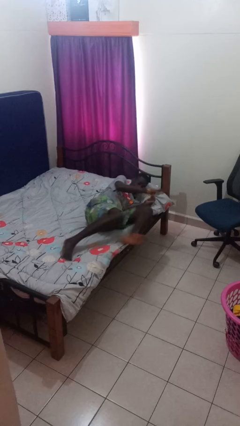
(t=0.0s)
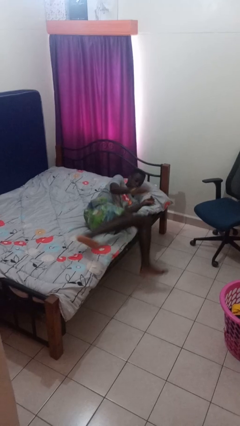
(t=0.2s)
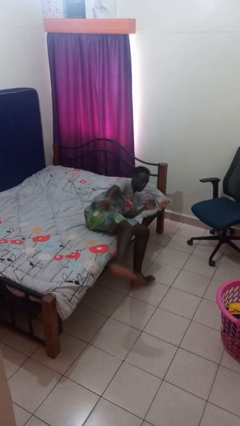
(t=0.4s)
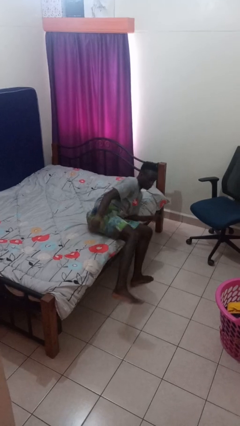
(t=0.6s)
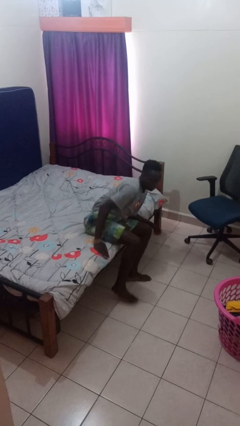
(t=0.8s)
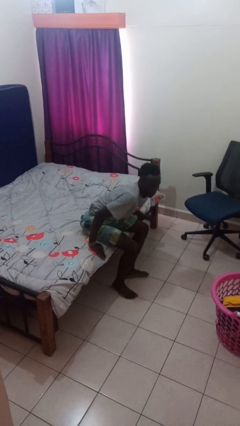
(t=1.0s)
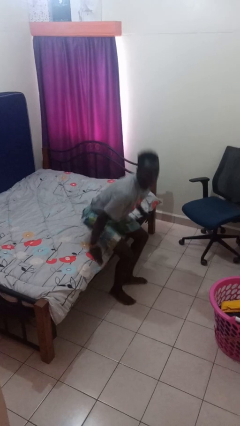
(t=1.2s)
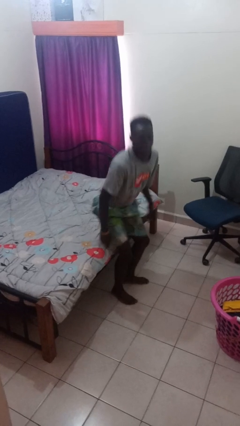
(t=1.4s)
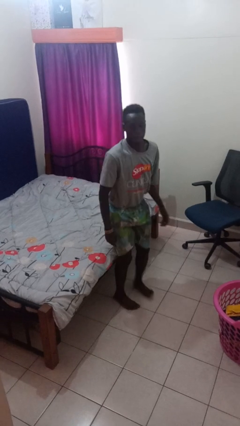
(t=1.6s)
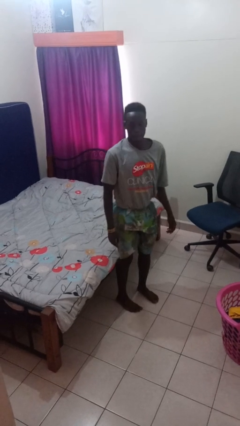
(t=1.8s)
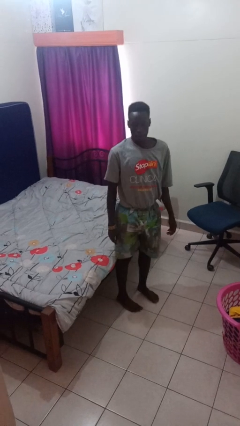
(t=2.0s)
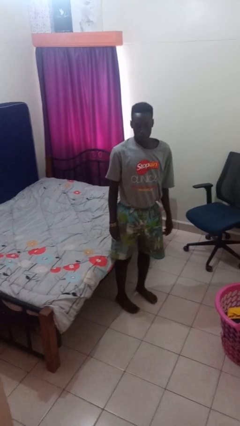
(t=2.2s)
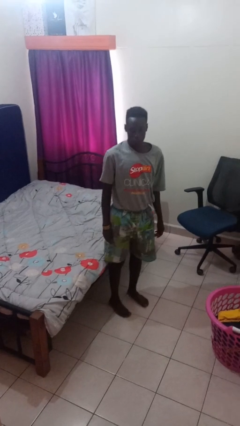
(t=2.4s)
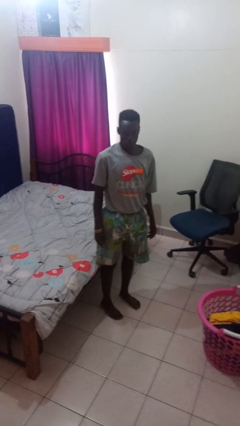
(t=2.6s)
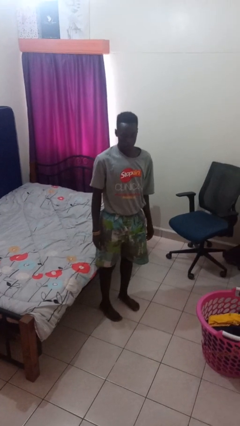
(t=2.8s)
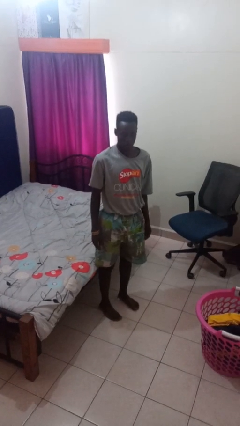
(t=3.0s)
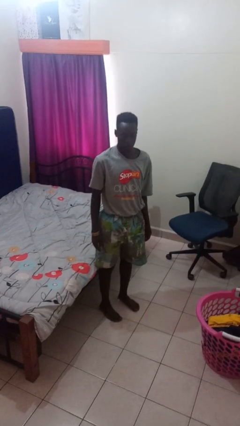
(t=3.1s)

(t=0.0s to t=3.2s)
person stands up

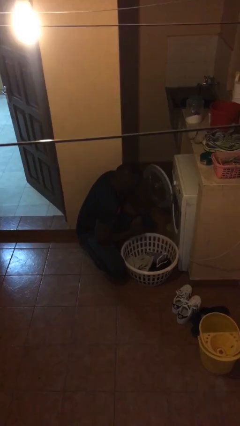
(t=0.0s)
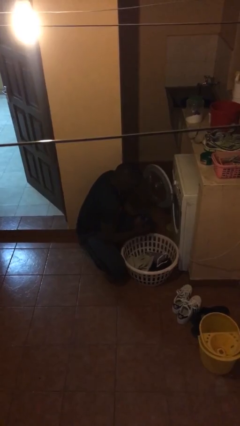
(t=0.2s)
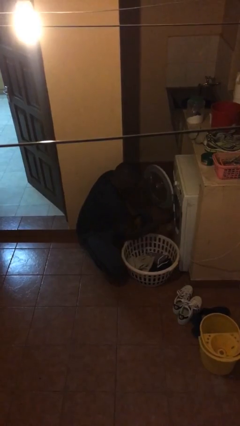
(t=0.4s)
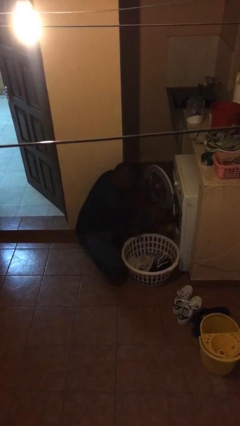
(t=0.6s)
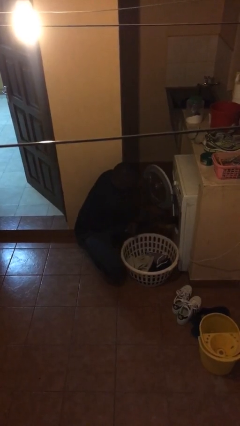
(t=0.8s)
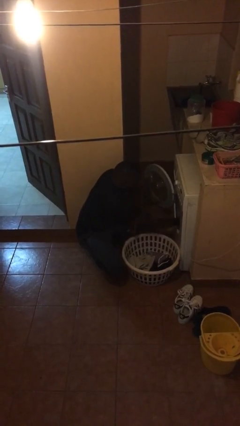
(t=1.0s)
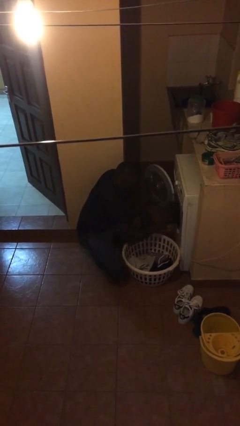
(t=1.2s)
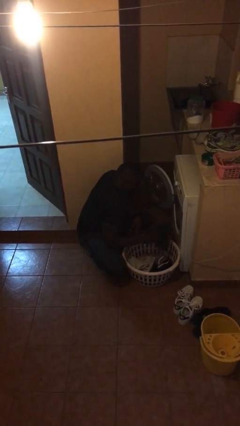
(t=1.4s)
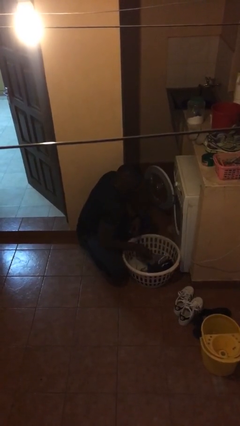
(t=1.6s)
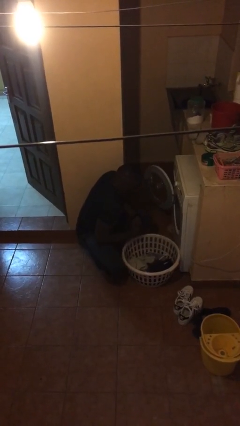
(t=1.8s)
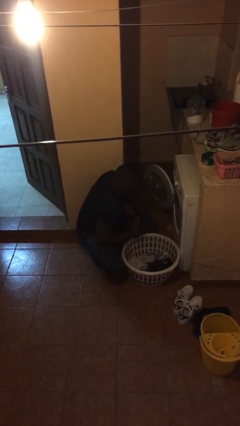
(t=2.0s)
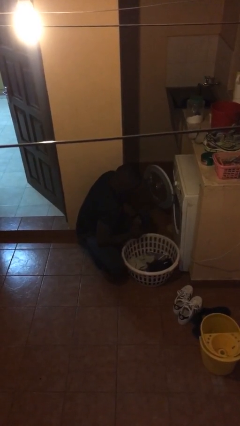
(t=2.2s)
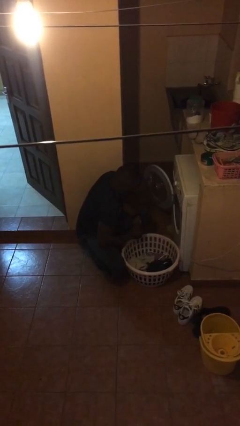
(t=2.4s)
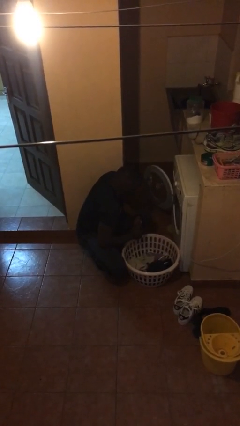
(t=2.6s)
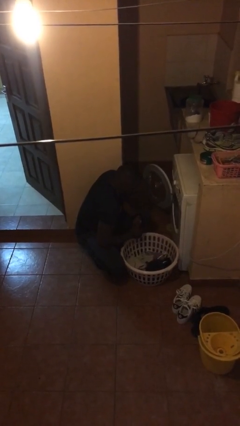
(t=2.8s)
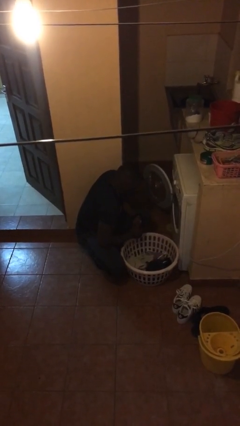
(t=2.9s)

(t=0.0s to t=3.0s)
person unloads clotheswasher

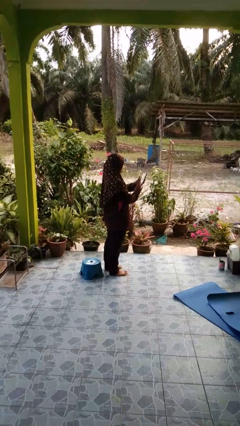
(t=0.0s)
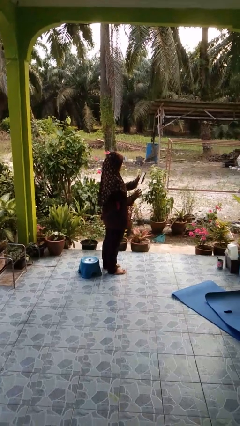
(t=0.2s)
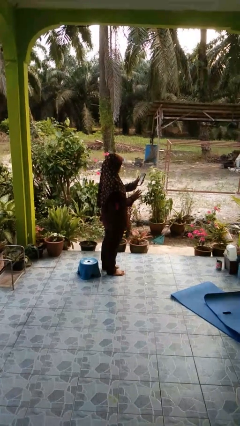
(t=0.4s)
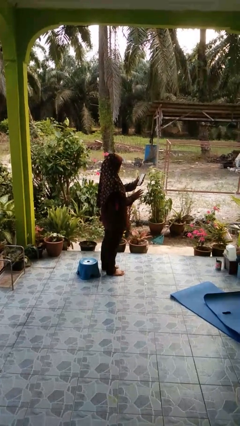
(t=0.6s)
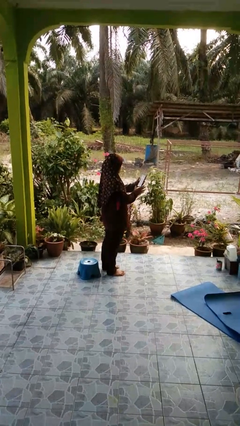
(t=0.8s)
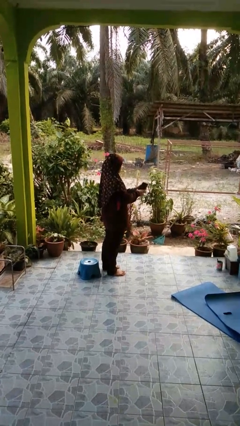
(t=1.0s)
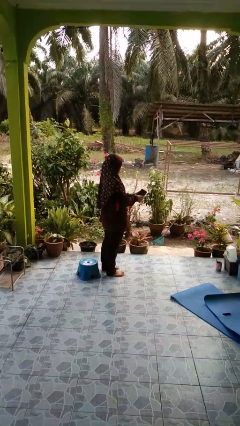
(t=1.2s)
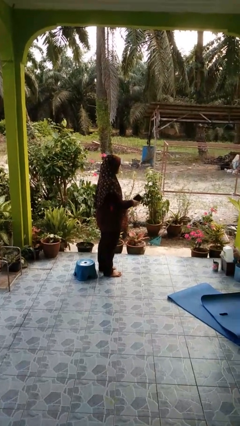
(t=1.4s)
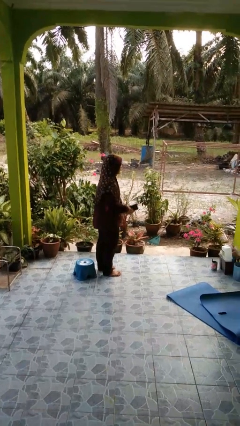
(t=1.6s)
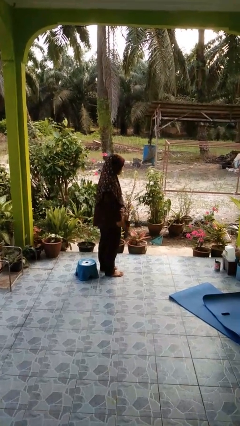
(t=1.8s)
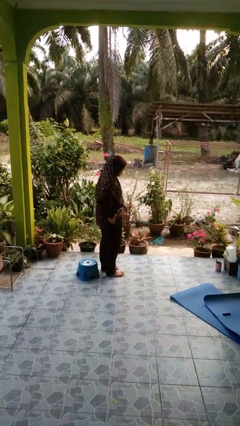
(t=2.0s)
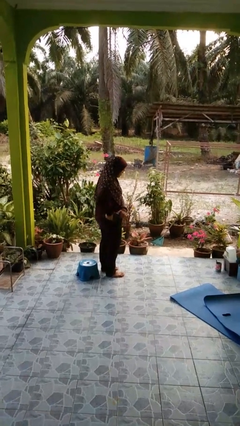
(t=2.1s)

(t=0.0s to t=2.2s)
person takes phone from pocket

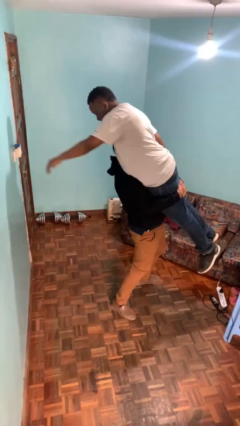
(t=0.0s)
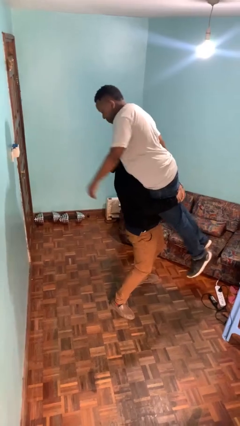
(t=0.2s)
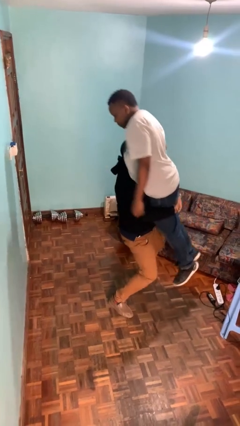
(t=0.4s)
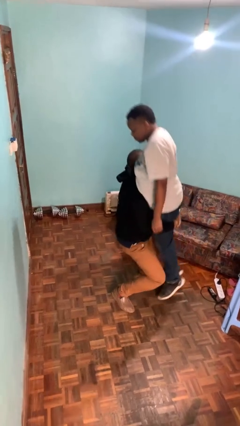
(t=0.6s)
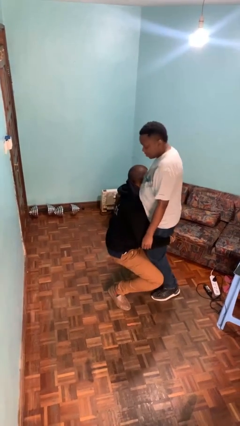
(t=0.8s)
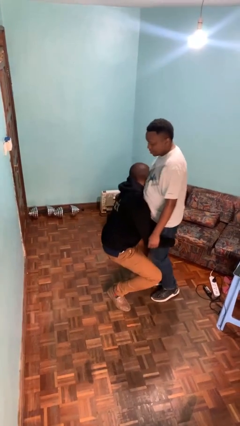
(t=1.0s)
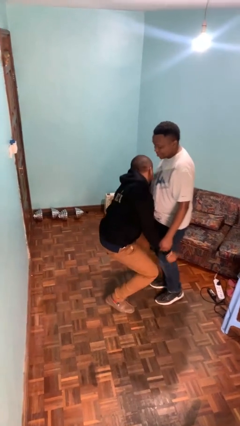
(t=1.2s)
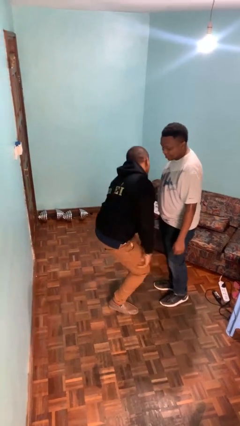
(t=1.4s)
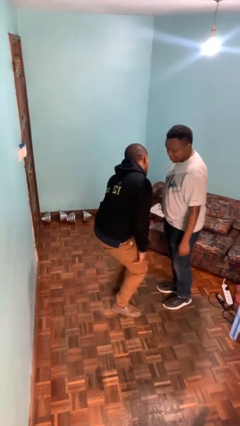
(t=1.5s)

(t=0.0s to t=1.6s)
person puts down person

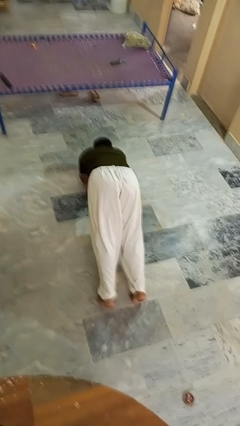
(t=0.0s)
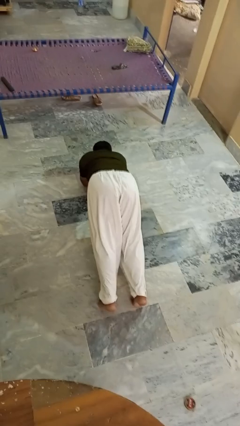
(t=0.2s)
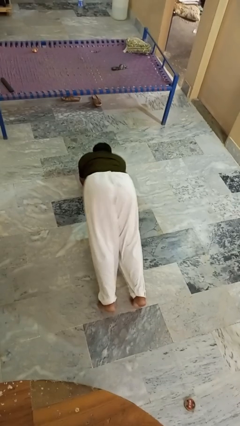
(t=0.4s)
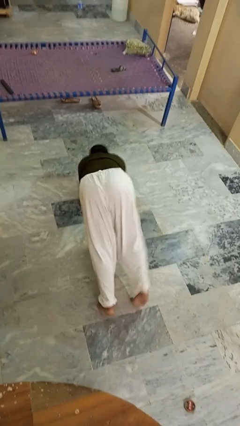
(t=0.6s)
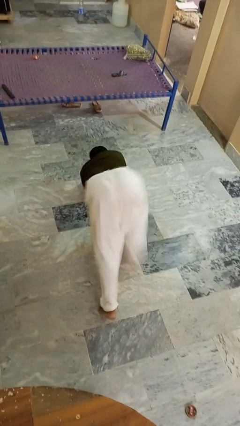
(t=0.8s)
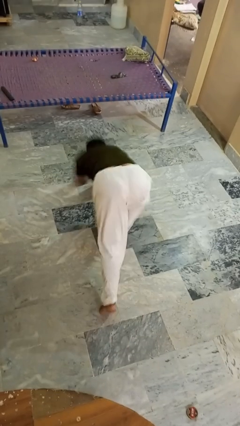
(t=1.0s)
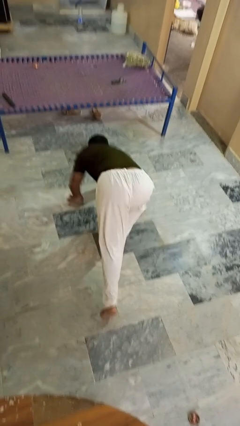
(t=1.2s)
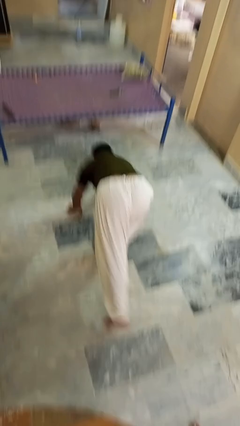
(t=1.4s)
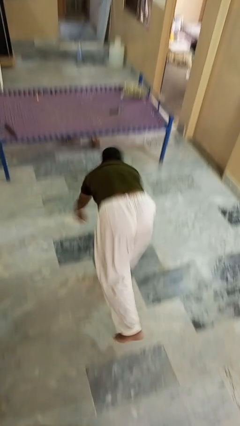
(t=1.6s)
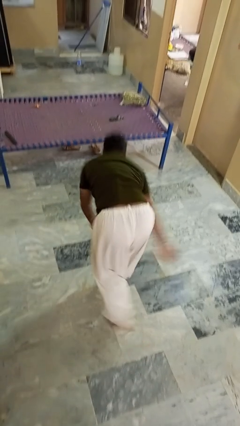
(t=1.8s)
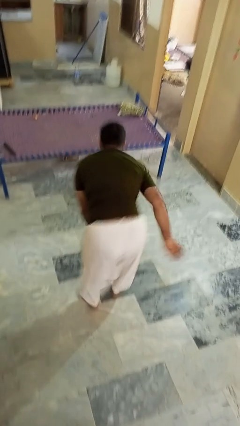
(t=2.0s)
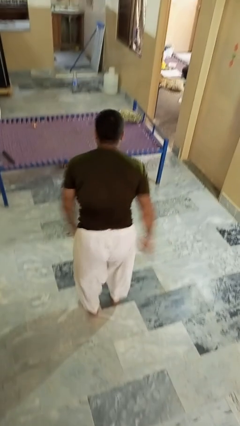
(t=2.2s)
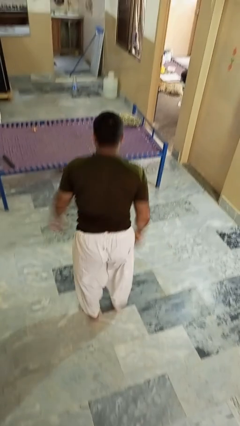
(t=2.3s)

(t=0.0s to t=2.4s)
person stands up from floor

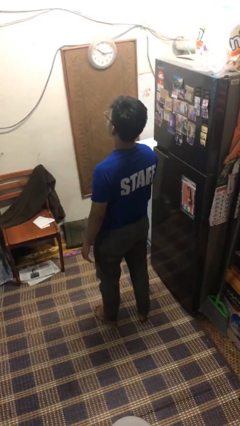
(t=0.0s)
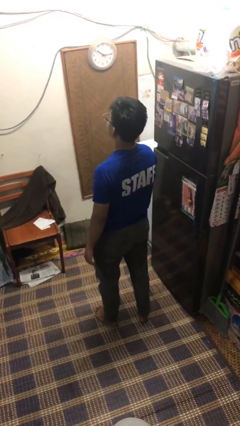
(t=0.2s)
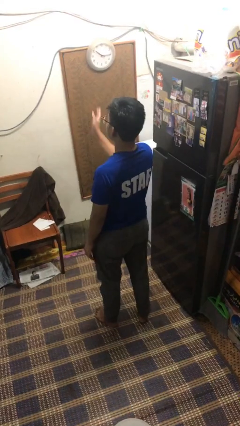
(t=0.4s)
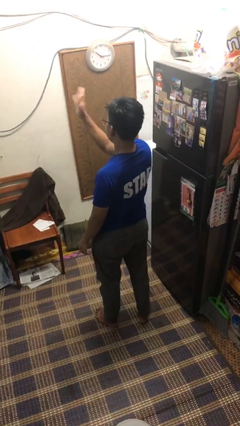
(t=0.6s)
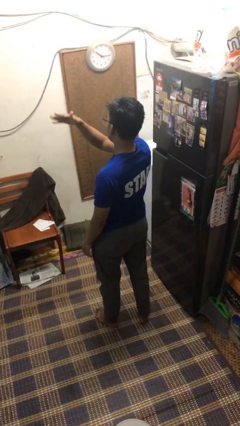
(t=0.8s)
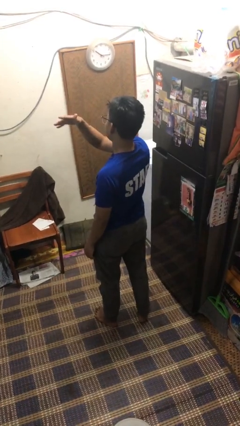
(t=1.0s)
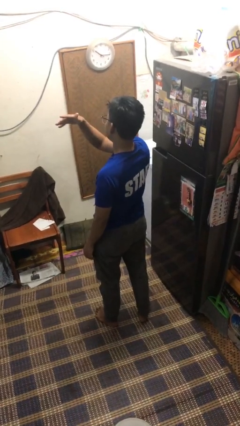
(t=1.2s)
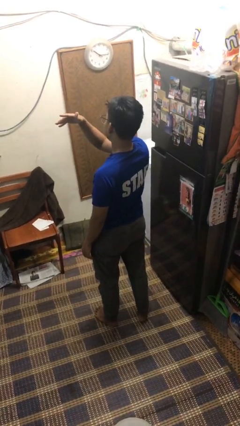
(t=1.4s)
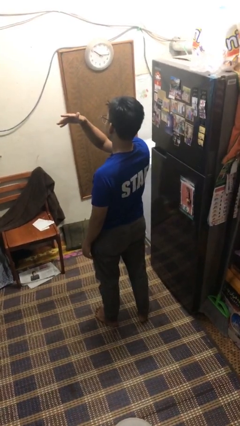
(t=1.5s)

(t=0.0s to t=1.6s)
person gestures swipe left

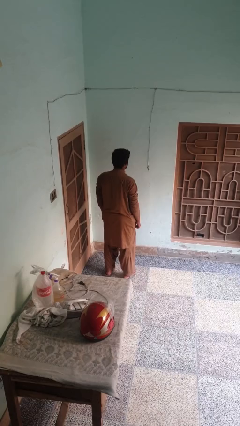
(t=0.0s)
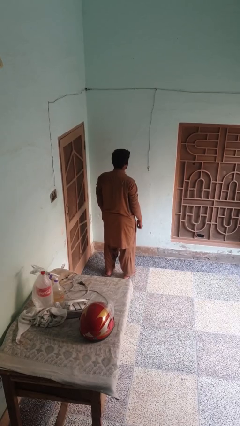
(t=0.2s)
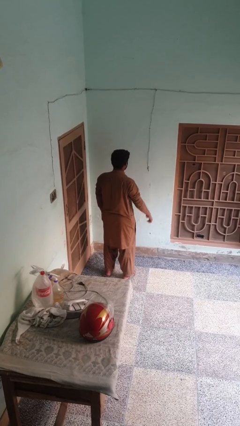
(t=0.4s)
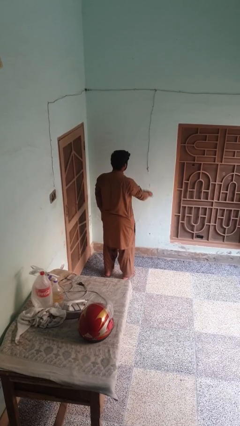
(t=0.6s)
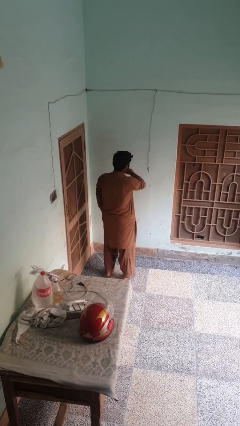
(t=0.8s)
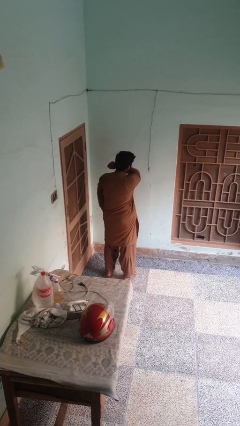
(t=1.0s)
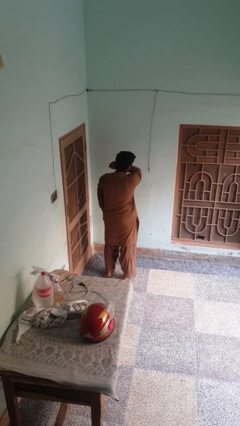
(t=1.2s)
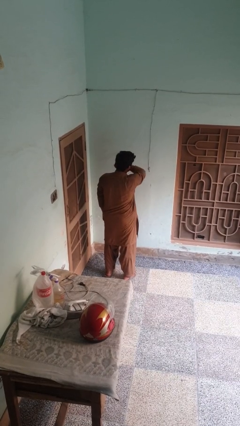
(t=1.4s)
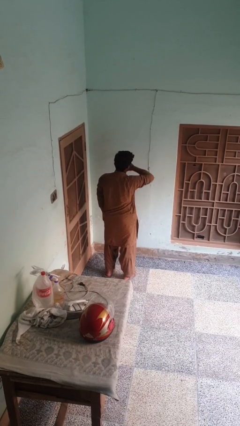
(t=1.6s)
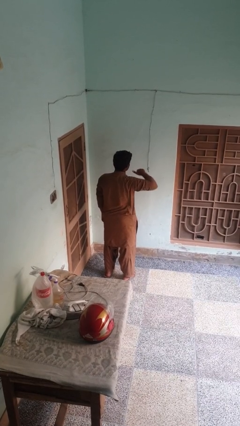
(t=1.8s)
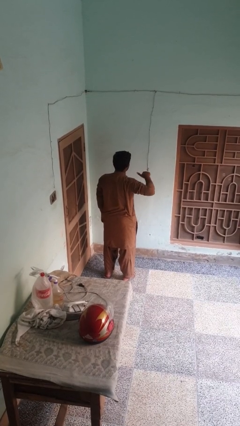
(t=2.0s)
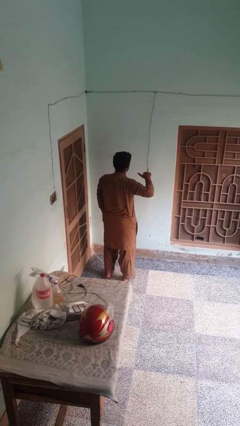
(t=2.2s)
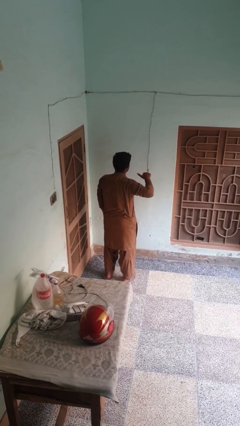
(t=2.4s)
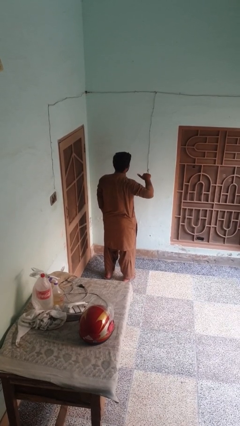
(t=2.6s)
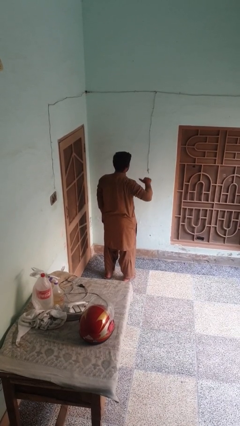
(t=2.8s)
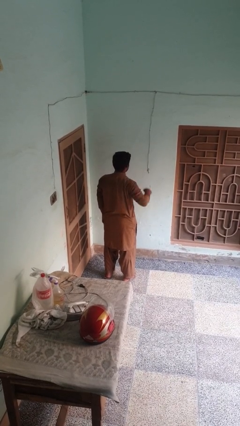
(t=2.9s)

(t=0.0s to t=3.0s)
person gestures cut
